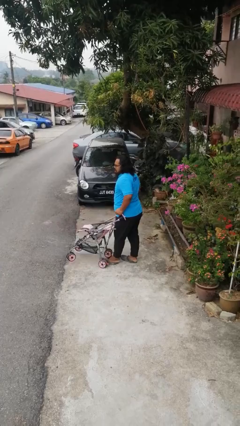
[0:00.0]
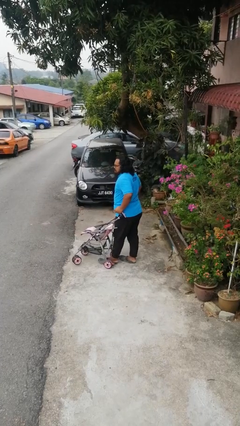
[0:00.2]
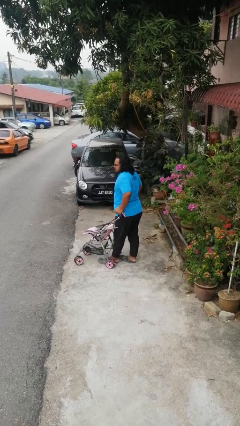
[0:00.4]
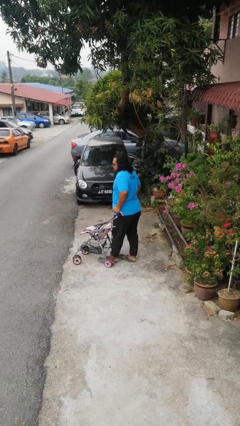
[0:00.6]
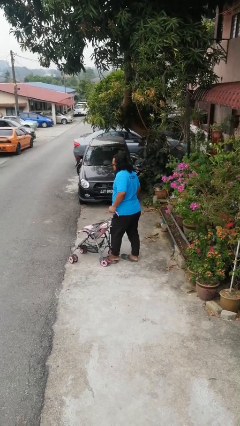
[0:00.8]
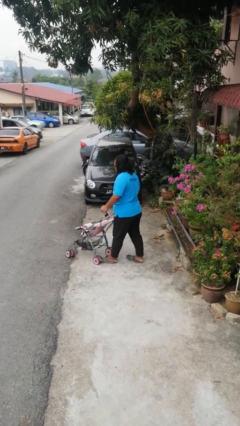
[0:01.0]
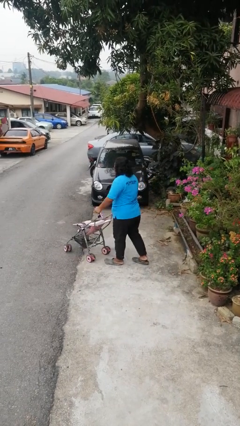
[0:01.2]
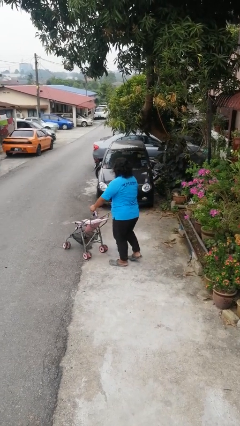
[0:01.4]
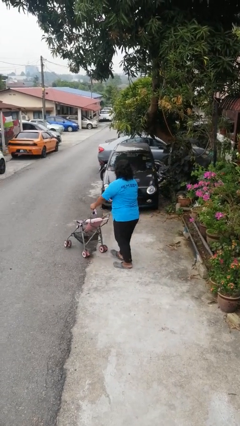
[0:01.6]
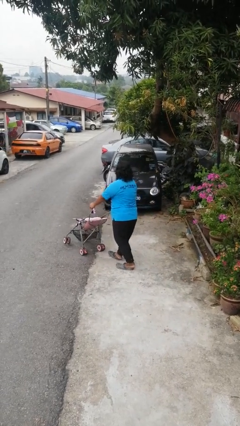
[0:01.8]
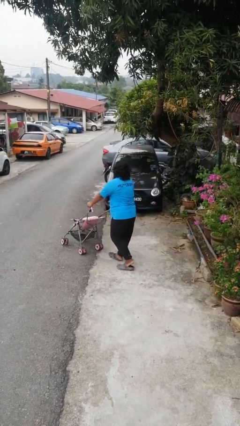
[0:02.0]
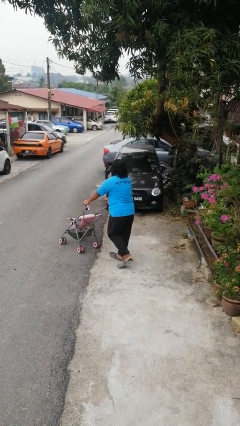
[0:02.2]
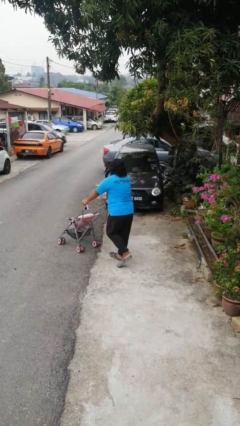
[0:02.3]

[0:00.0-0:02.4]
person pushes wheeled cart

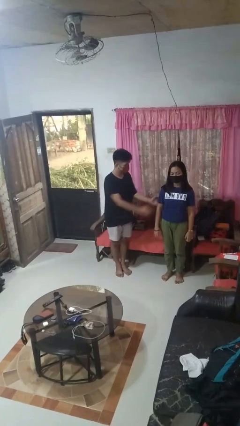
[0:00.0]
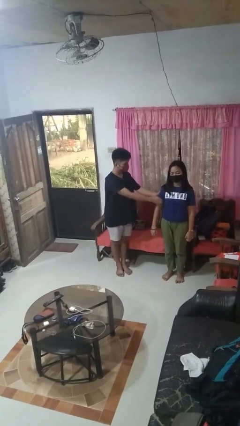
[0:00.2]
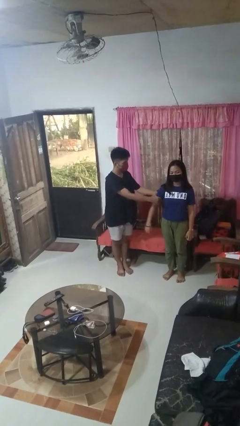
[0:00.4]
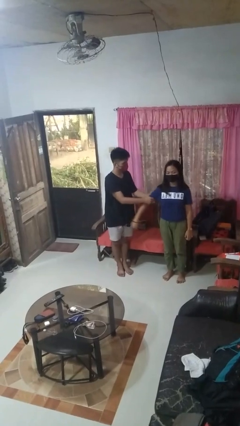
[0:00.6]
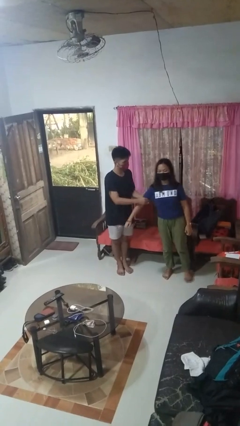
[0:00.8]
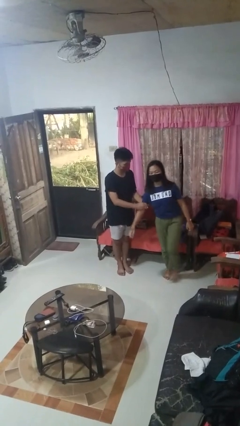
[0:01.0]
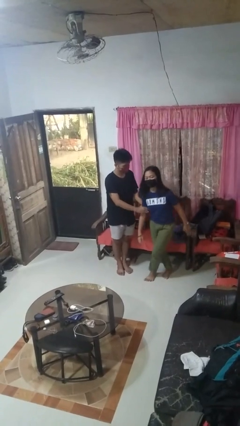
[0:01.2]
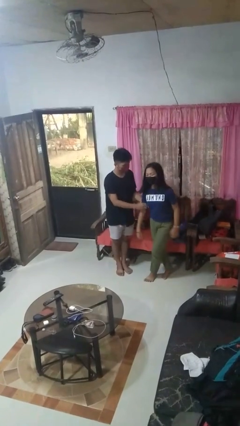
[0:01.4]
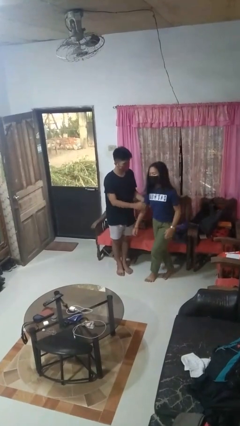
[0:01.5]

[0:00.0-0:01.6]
person grabs person by bicep

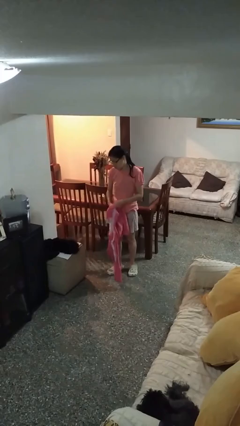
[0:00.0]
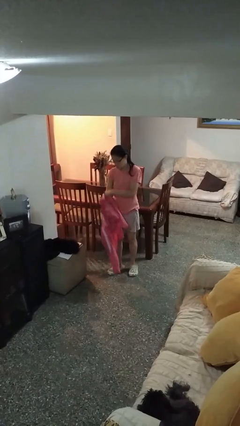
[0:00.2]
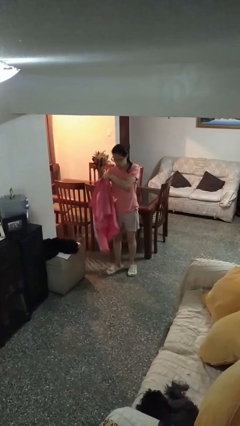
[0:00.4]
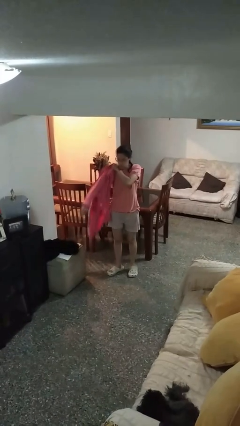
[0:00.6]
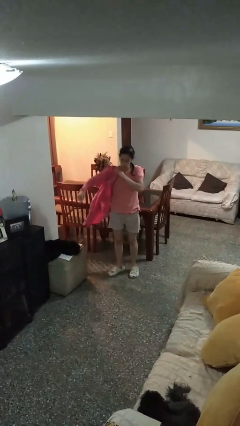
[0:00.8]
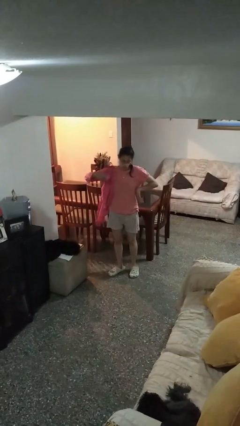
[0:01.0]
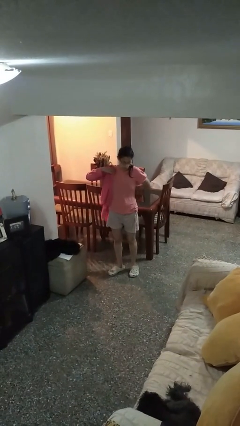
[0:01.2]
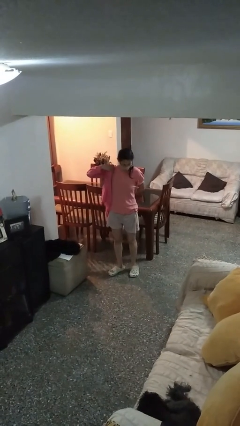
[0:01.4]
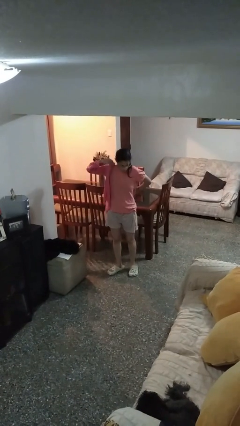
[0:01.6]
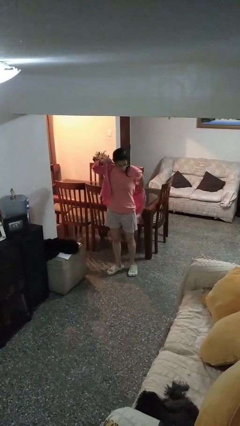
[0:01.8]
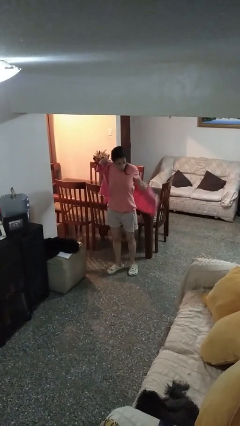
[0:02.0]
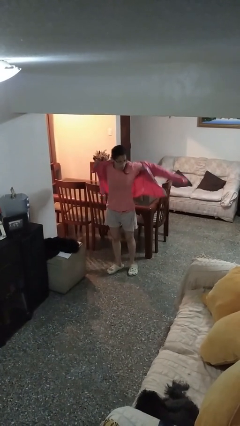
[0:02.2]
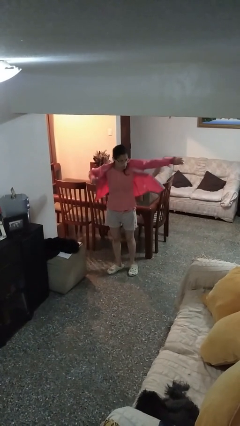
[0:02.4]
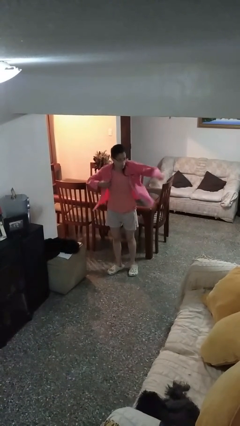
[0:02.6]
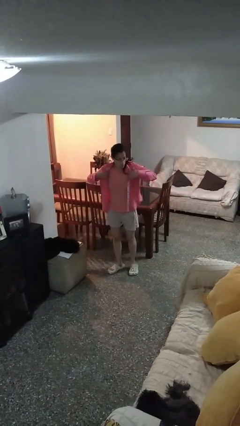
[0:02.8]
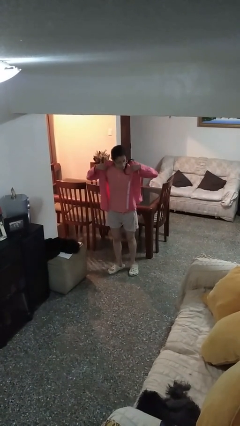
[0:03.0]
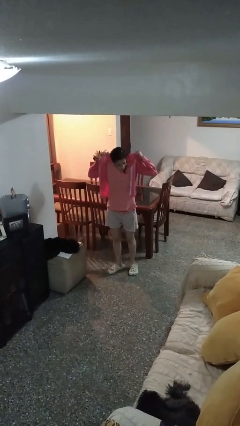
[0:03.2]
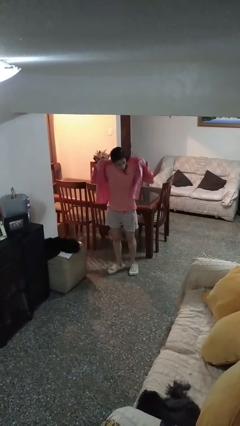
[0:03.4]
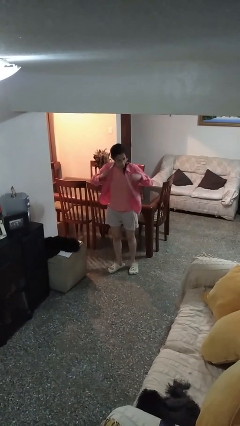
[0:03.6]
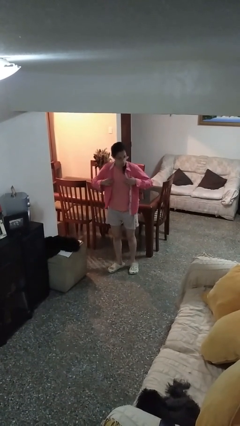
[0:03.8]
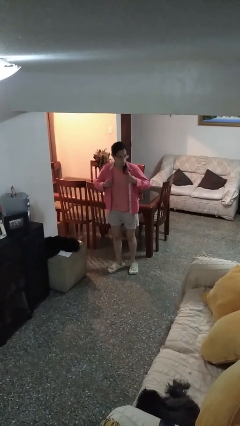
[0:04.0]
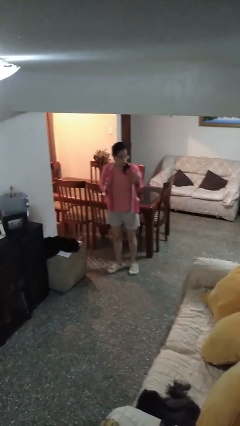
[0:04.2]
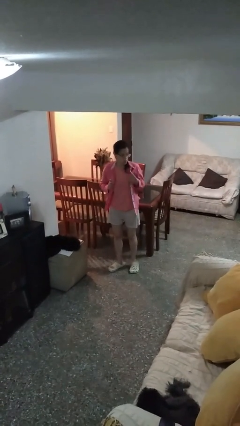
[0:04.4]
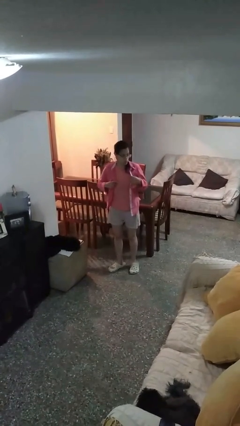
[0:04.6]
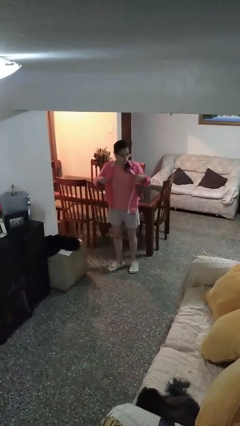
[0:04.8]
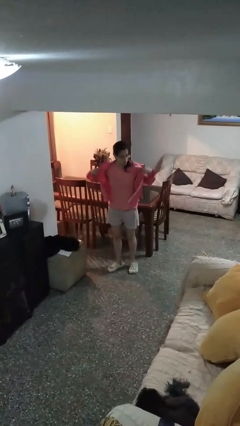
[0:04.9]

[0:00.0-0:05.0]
person puts on shirt

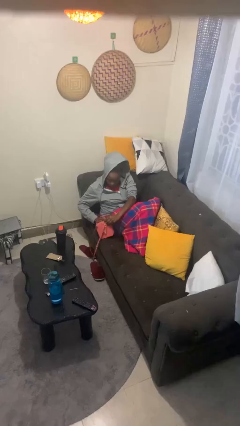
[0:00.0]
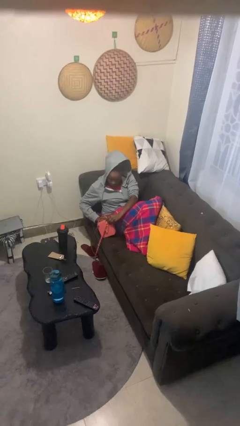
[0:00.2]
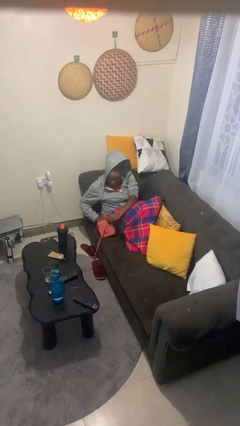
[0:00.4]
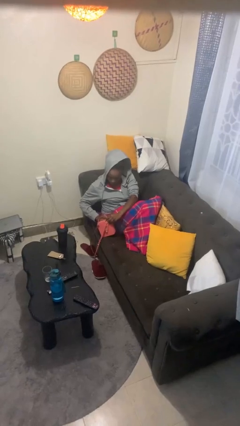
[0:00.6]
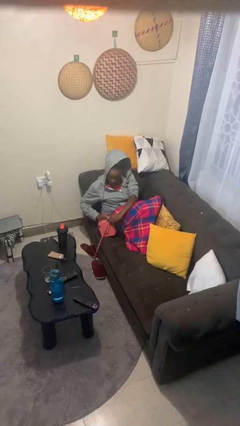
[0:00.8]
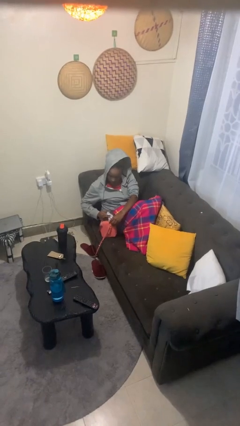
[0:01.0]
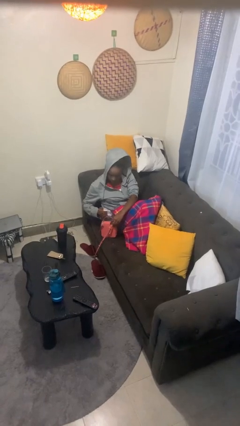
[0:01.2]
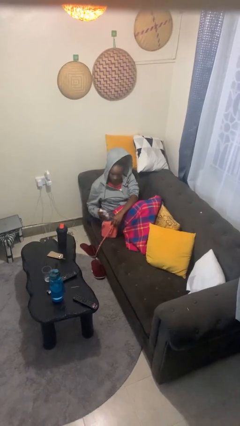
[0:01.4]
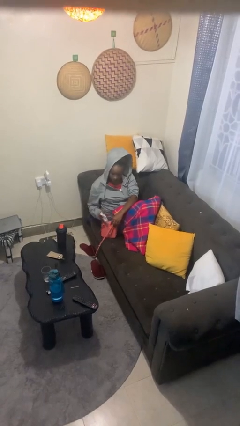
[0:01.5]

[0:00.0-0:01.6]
person takes object from purse

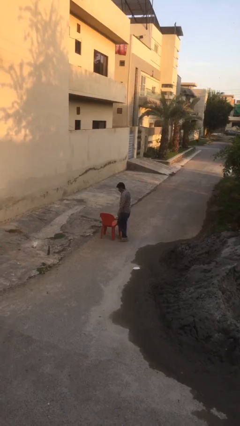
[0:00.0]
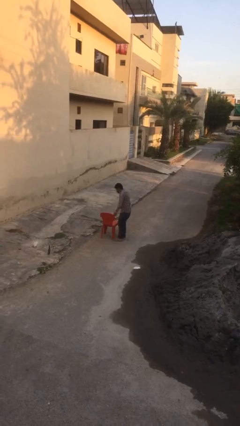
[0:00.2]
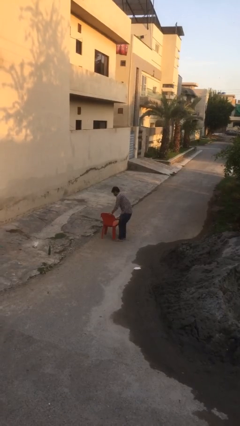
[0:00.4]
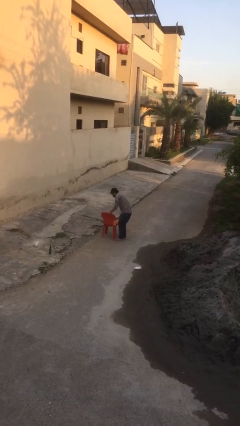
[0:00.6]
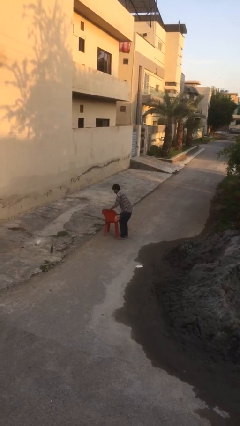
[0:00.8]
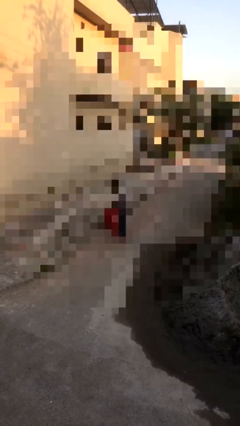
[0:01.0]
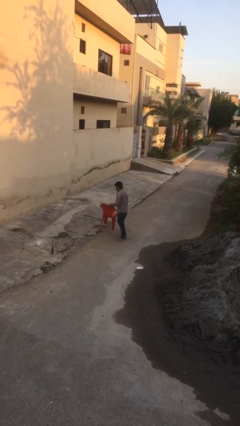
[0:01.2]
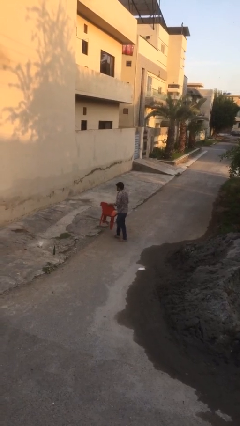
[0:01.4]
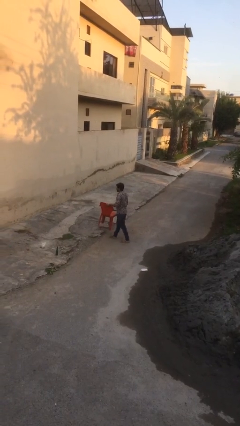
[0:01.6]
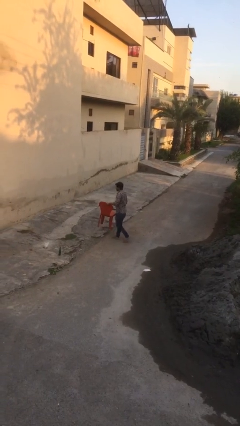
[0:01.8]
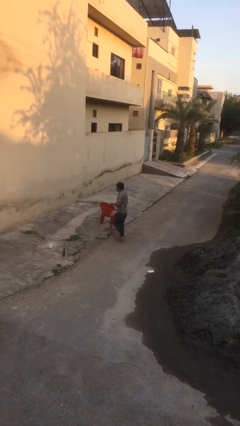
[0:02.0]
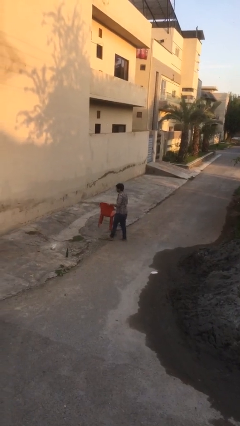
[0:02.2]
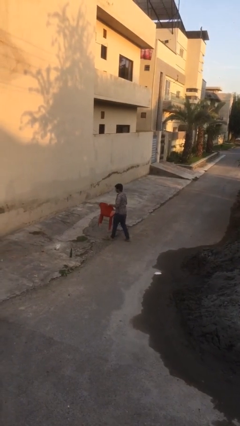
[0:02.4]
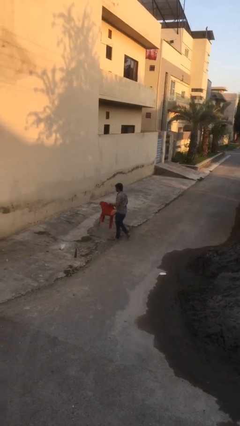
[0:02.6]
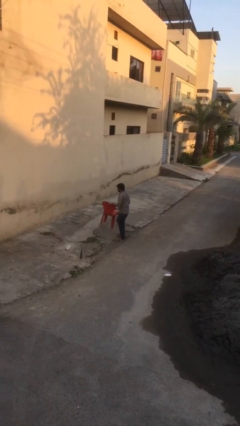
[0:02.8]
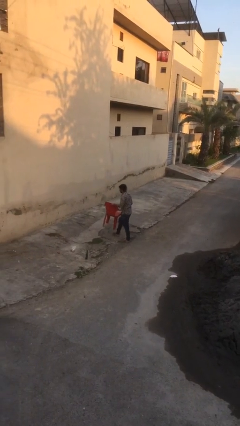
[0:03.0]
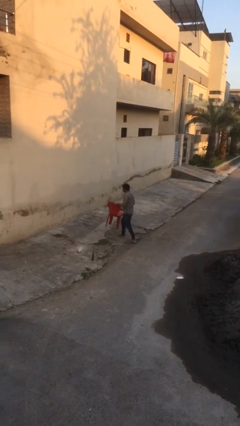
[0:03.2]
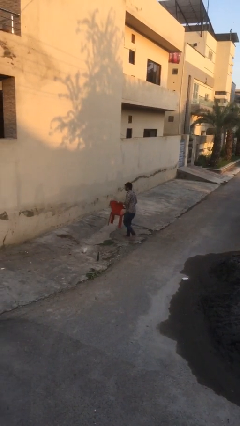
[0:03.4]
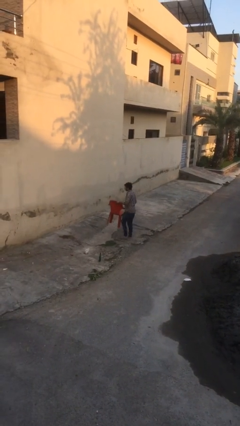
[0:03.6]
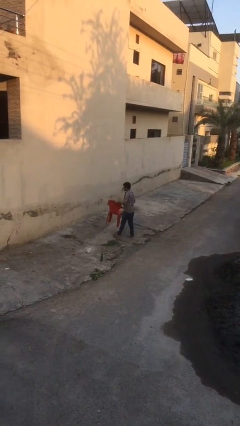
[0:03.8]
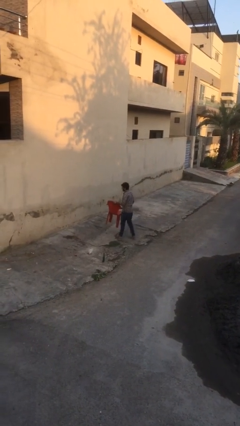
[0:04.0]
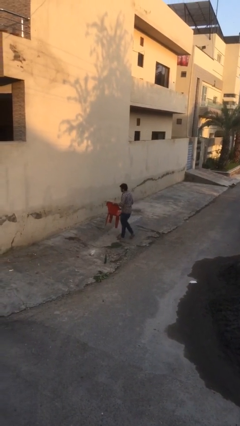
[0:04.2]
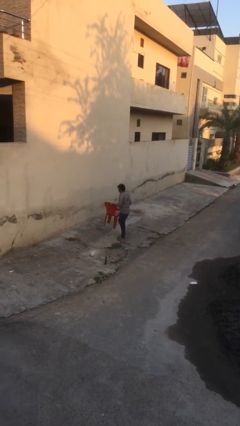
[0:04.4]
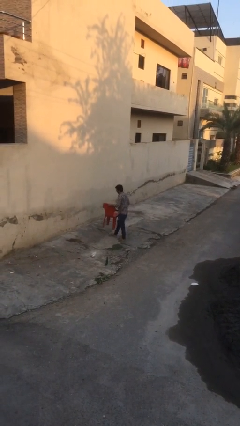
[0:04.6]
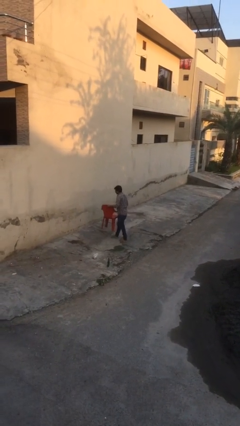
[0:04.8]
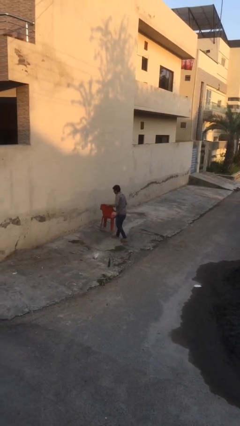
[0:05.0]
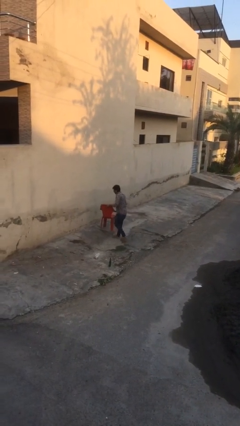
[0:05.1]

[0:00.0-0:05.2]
person carries heavy object

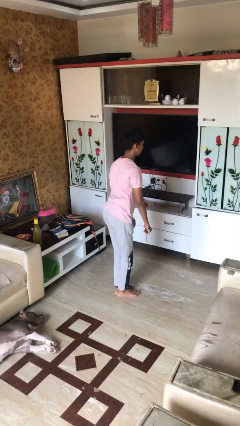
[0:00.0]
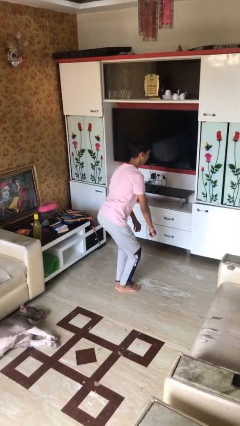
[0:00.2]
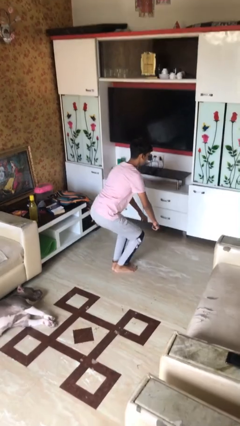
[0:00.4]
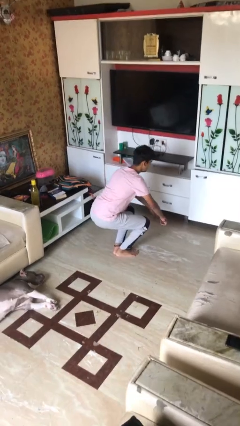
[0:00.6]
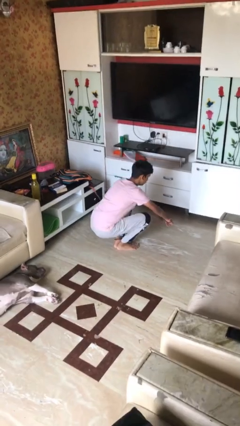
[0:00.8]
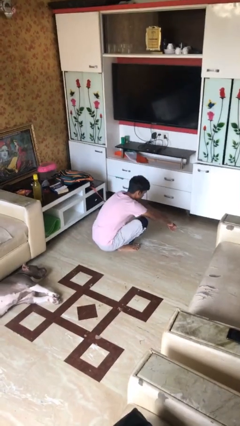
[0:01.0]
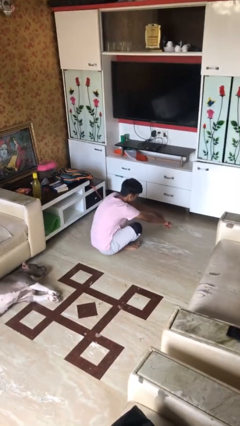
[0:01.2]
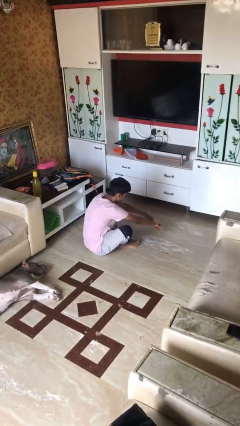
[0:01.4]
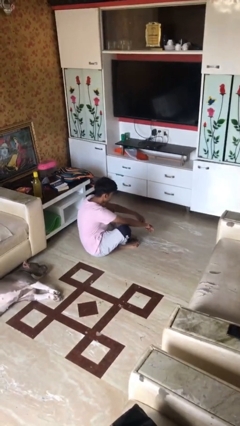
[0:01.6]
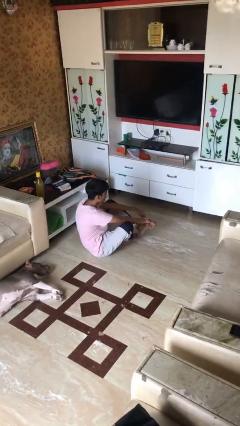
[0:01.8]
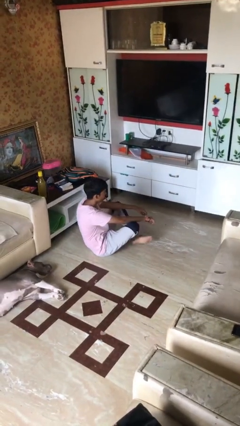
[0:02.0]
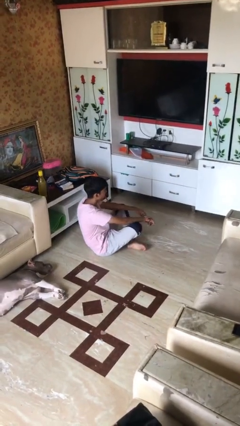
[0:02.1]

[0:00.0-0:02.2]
person sits crisscross
